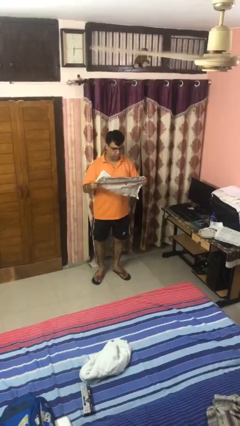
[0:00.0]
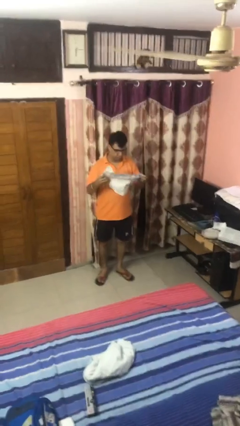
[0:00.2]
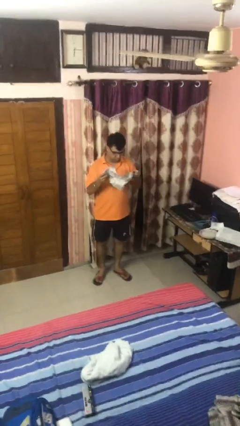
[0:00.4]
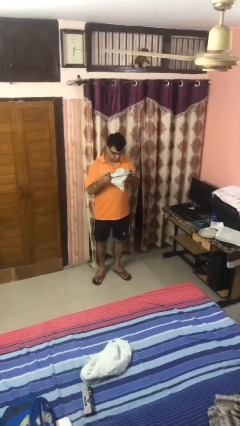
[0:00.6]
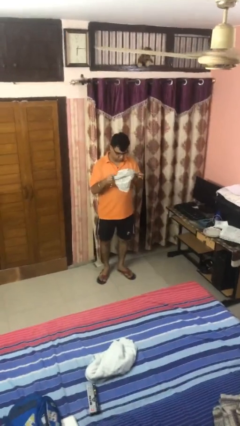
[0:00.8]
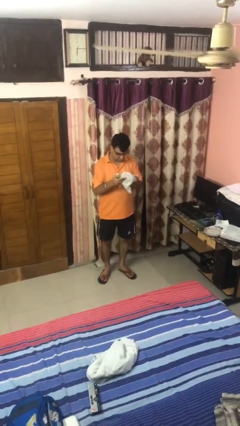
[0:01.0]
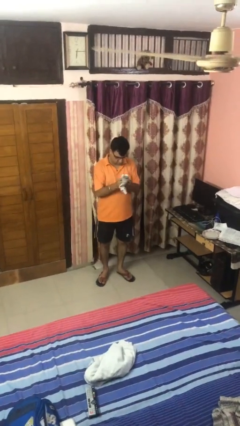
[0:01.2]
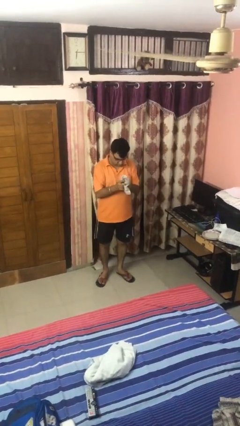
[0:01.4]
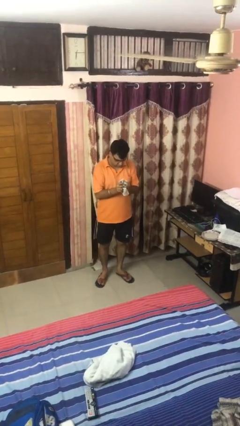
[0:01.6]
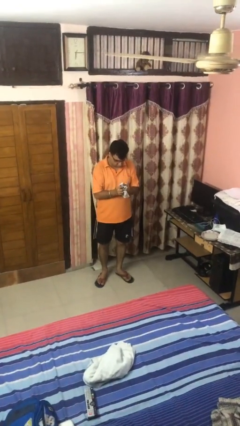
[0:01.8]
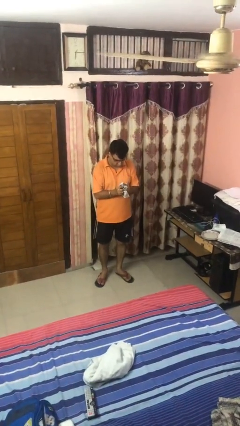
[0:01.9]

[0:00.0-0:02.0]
person crumples paper

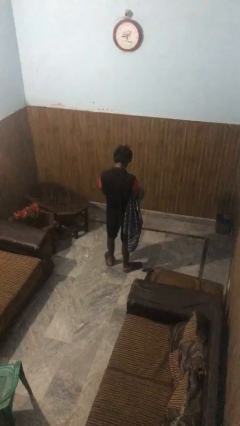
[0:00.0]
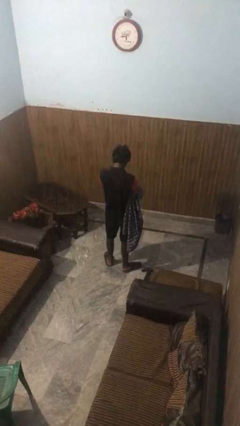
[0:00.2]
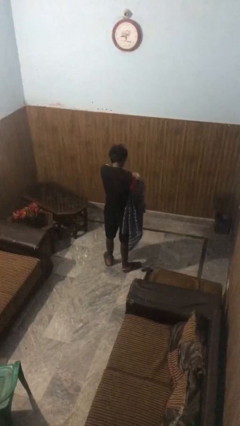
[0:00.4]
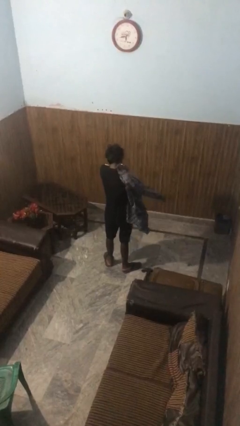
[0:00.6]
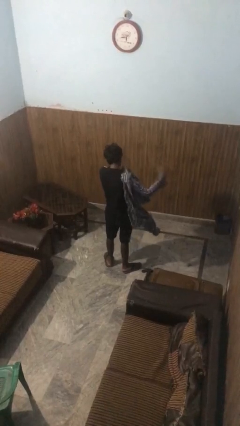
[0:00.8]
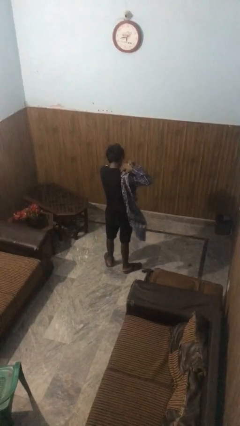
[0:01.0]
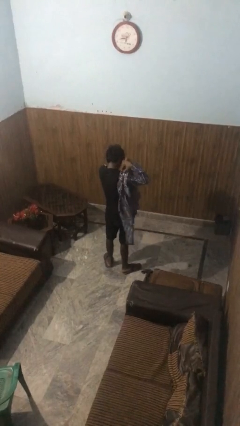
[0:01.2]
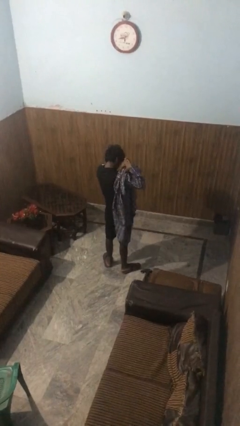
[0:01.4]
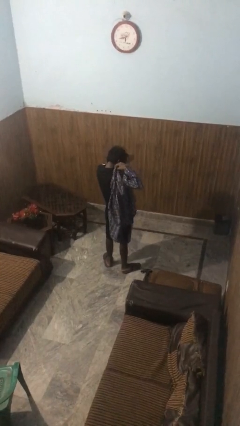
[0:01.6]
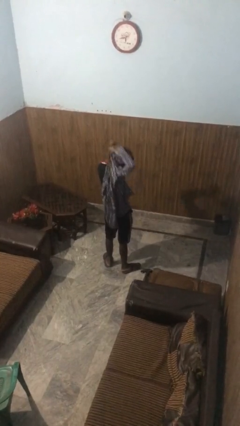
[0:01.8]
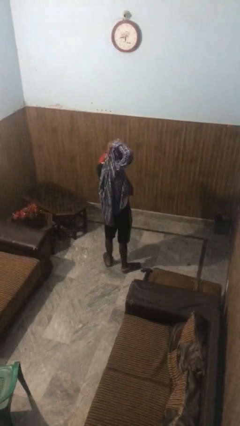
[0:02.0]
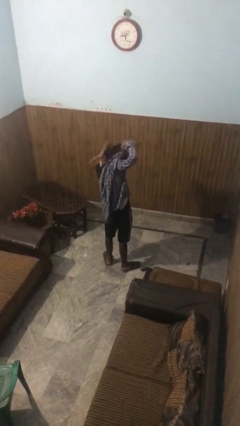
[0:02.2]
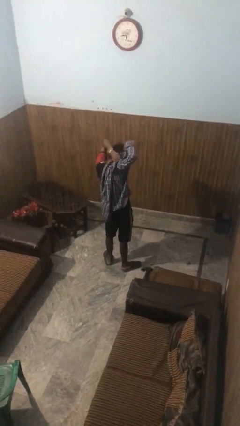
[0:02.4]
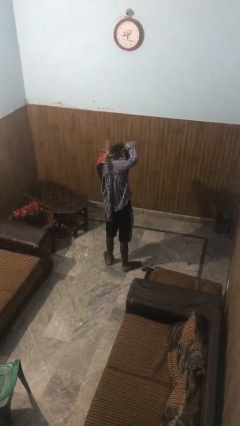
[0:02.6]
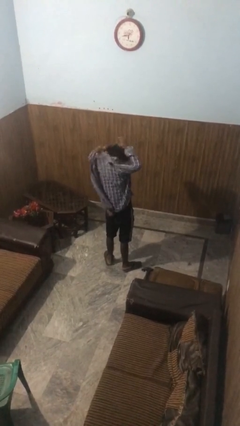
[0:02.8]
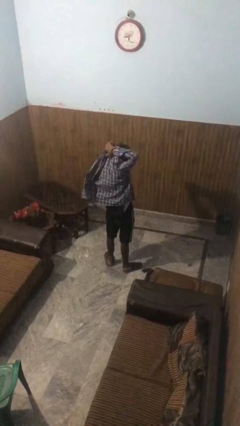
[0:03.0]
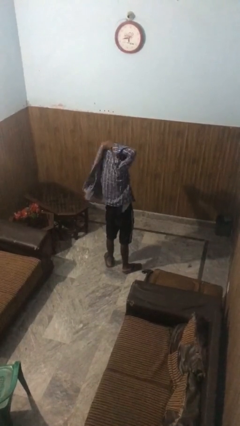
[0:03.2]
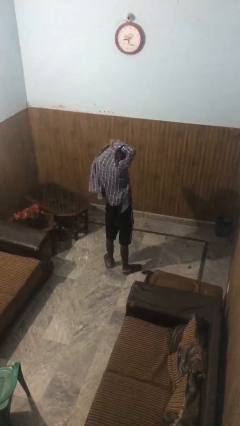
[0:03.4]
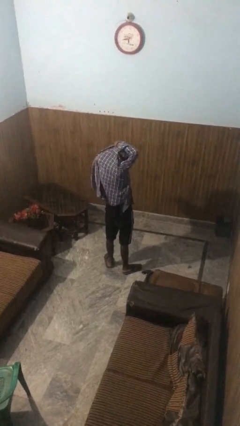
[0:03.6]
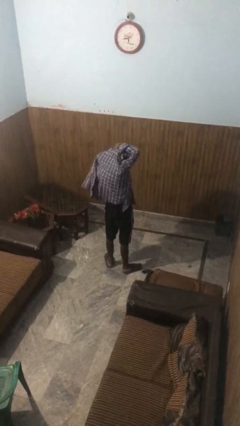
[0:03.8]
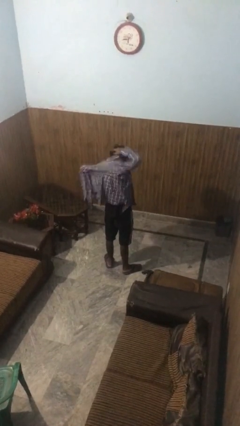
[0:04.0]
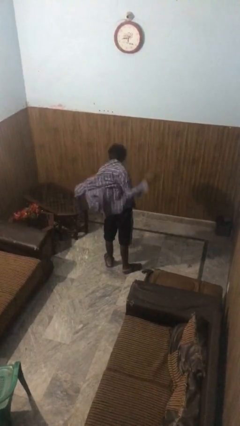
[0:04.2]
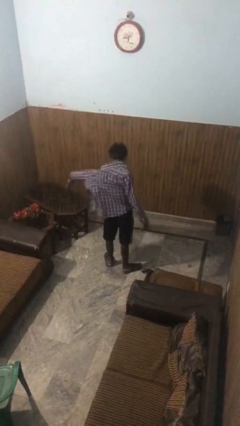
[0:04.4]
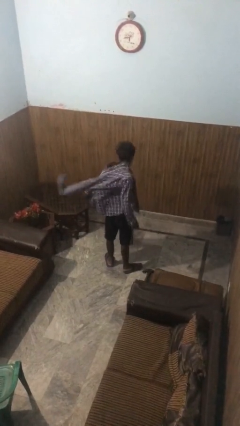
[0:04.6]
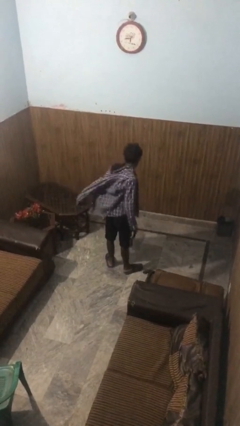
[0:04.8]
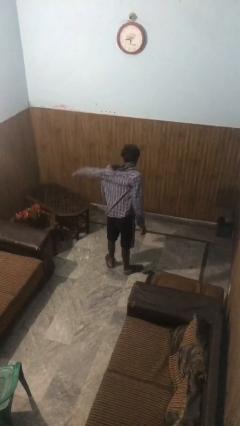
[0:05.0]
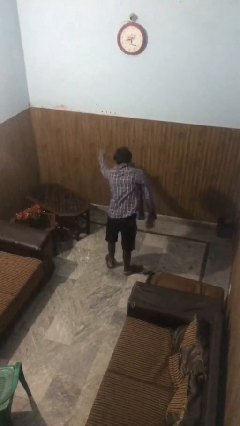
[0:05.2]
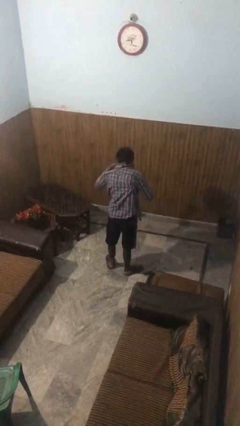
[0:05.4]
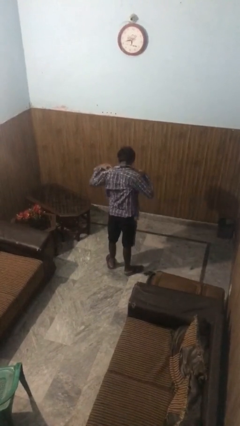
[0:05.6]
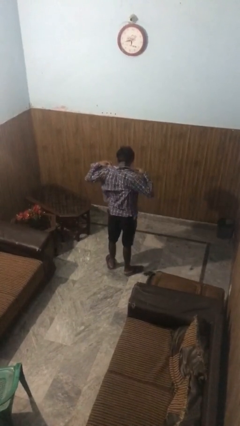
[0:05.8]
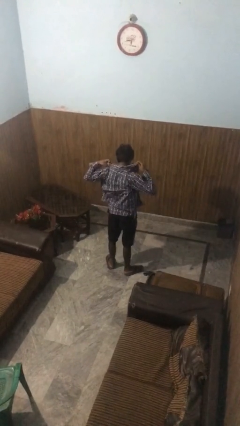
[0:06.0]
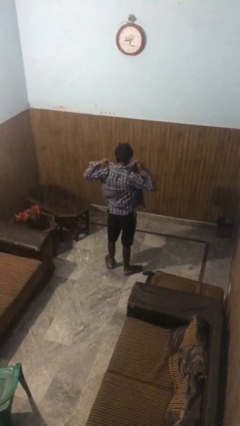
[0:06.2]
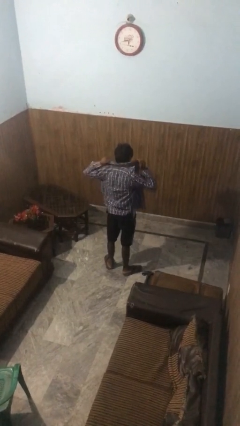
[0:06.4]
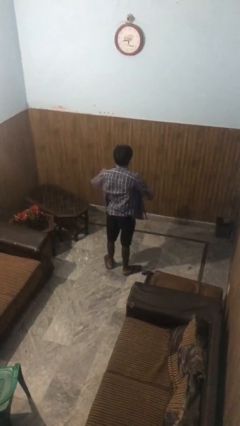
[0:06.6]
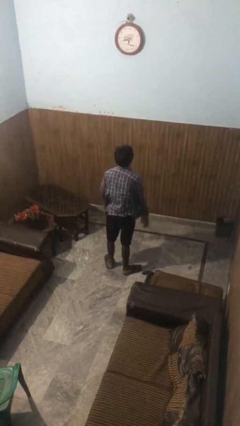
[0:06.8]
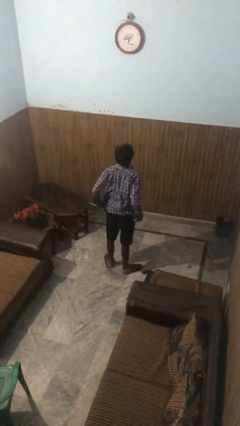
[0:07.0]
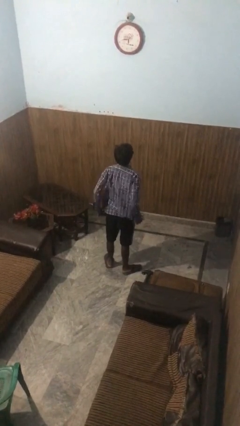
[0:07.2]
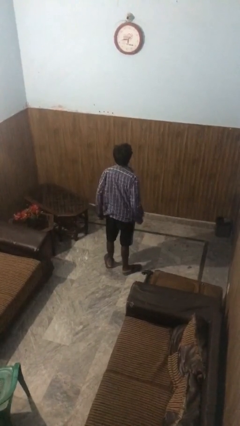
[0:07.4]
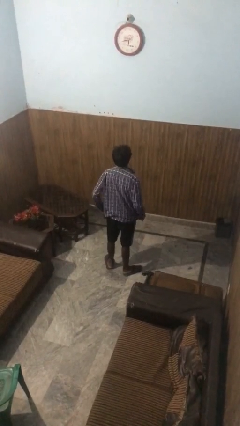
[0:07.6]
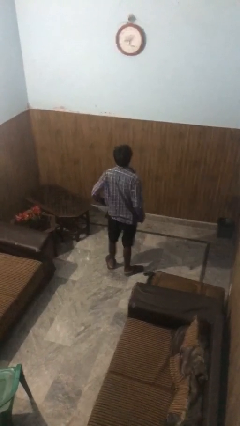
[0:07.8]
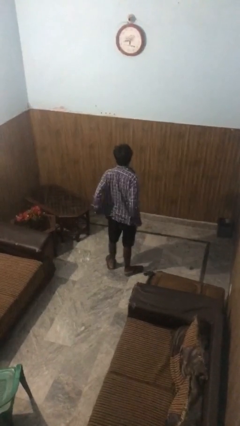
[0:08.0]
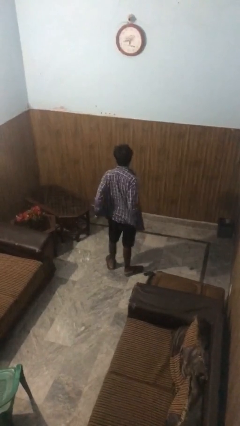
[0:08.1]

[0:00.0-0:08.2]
person puts on shirt

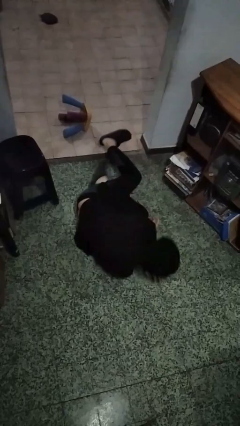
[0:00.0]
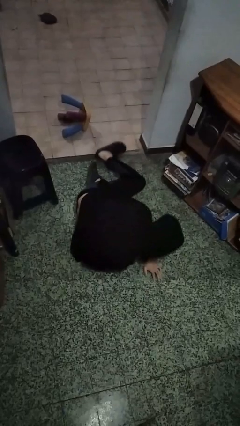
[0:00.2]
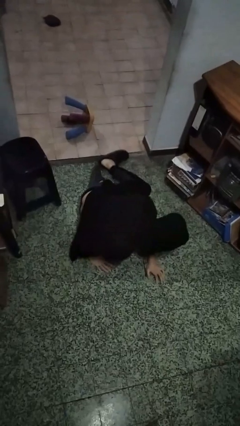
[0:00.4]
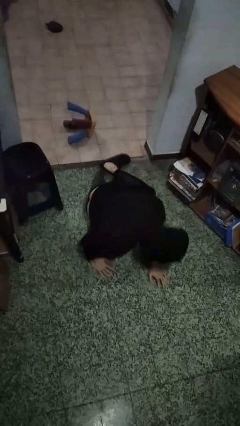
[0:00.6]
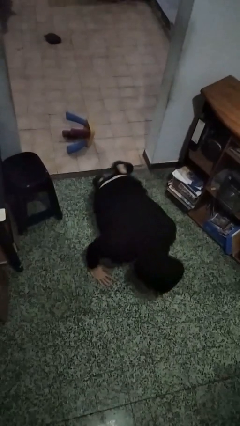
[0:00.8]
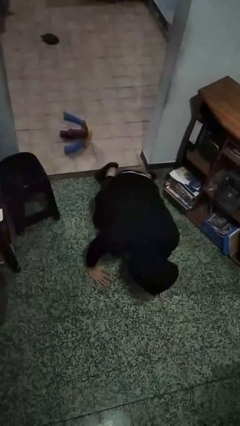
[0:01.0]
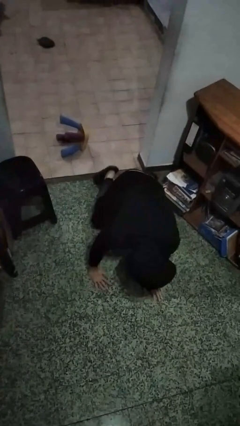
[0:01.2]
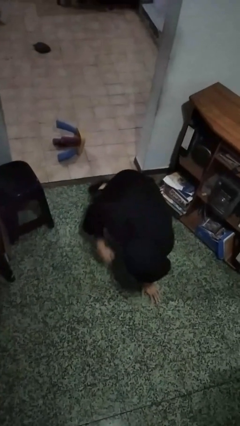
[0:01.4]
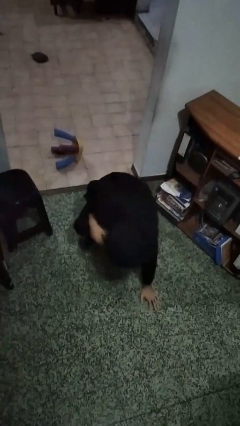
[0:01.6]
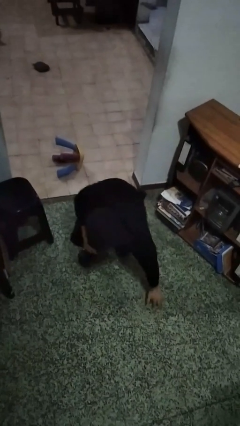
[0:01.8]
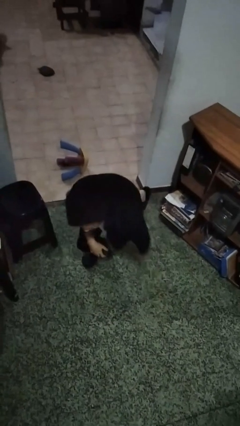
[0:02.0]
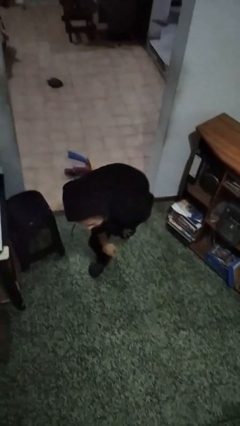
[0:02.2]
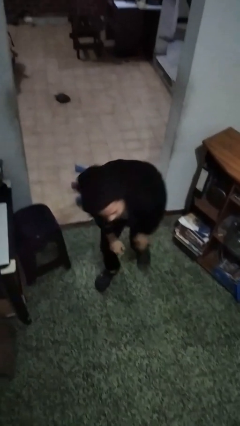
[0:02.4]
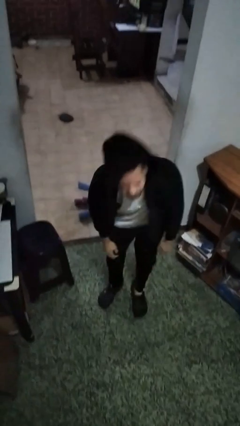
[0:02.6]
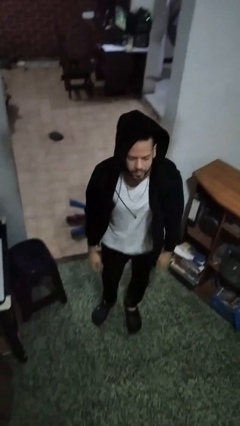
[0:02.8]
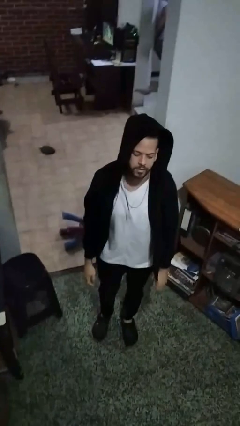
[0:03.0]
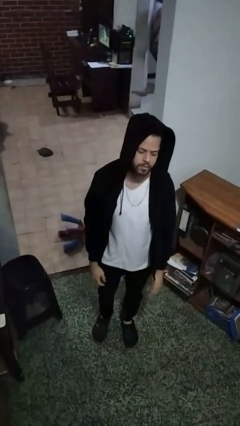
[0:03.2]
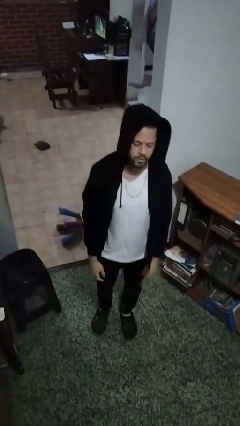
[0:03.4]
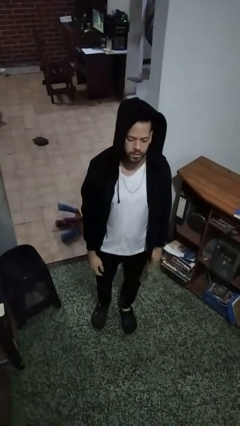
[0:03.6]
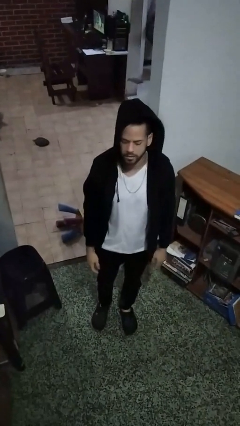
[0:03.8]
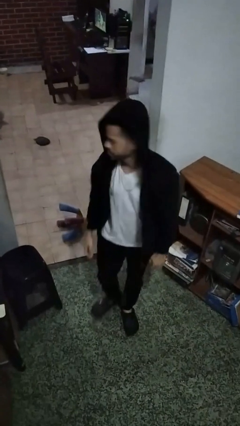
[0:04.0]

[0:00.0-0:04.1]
person stands up from floor

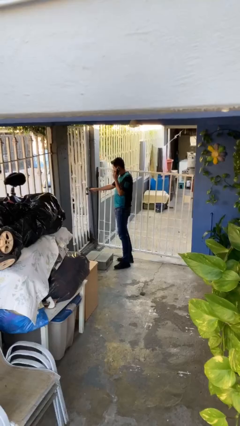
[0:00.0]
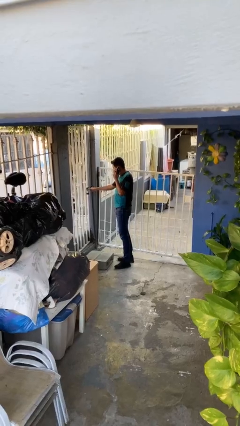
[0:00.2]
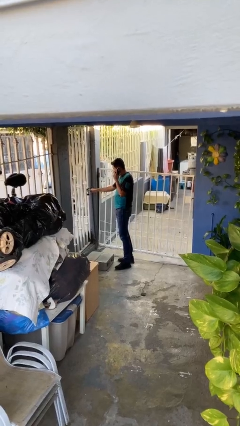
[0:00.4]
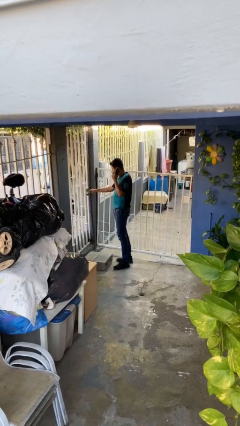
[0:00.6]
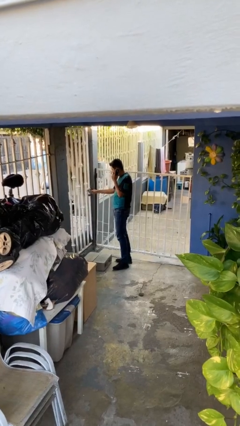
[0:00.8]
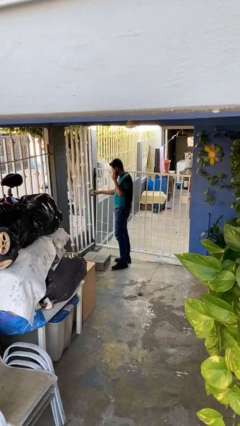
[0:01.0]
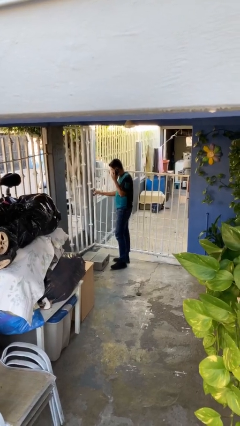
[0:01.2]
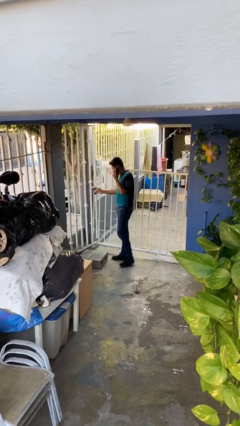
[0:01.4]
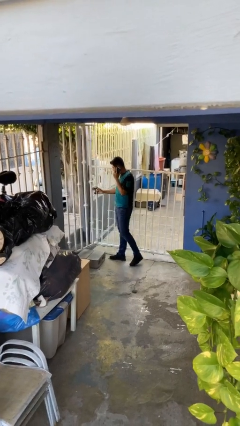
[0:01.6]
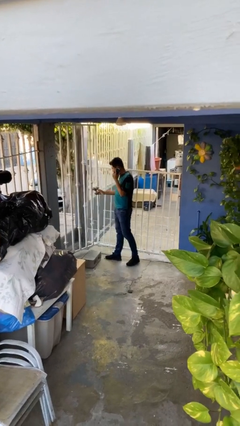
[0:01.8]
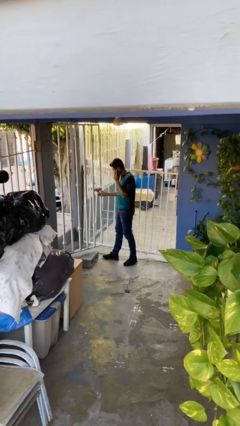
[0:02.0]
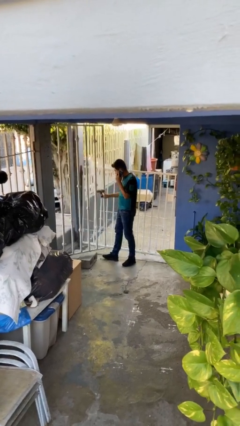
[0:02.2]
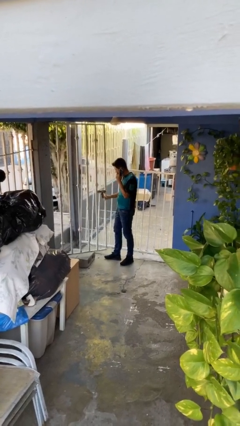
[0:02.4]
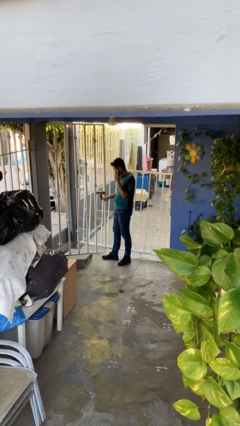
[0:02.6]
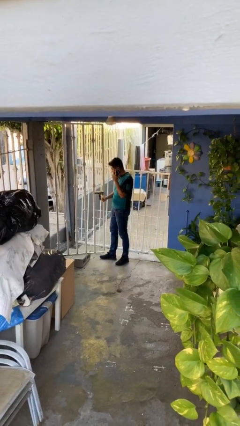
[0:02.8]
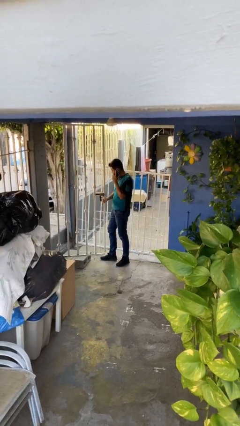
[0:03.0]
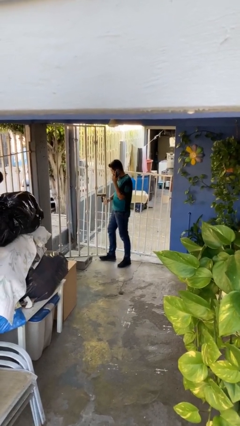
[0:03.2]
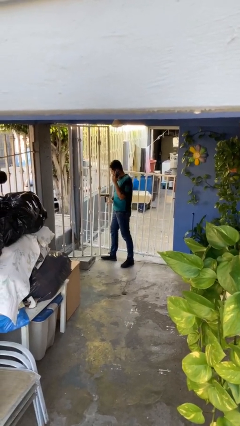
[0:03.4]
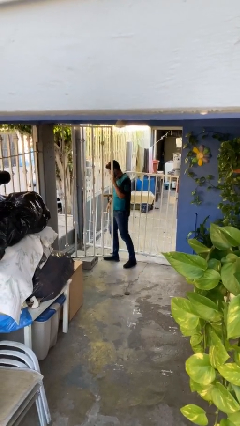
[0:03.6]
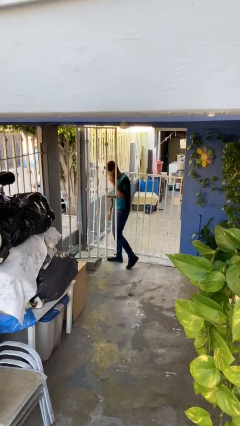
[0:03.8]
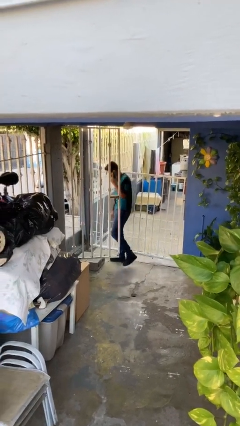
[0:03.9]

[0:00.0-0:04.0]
person opens facility door
